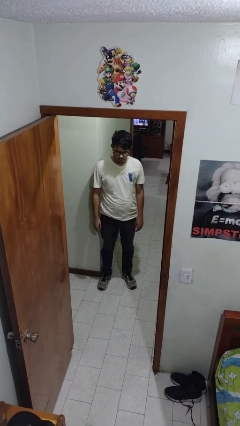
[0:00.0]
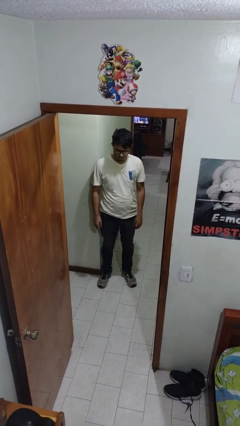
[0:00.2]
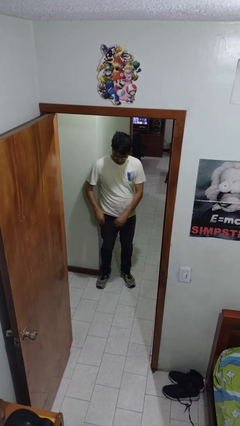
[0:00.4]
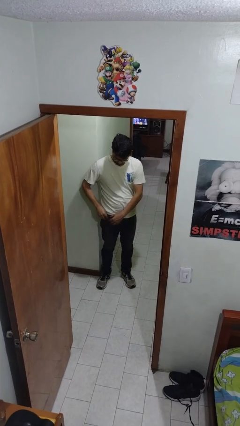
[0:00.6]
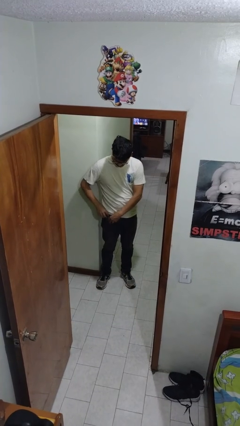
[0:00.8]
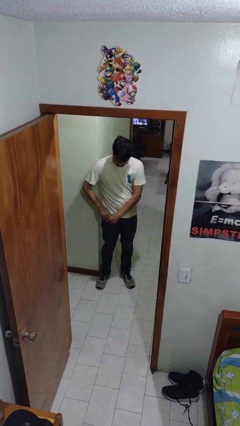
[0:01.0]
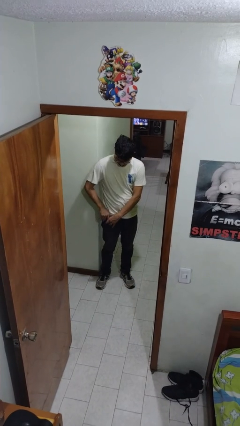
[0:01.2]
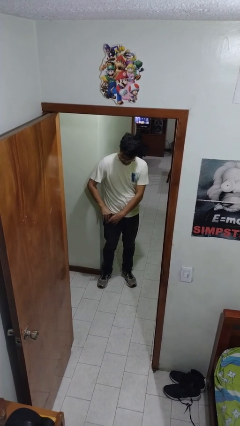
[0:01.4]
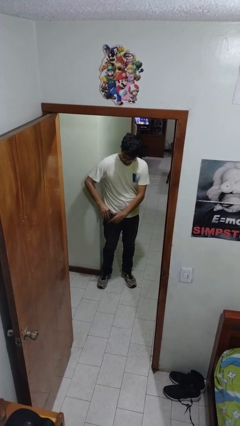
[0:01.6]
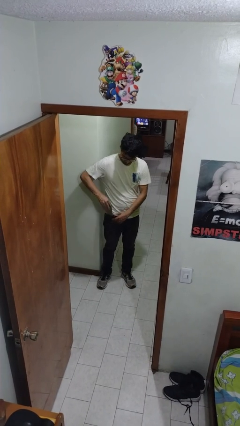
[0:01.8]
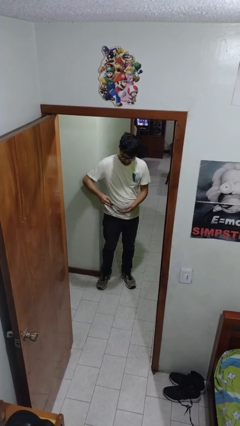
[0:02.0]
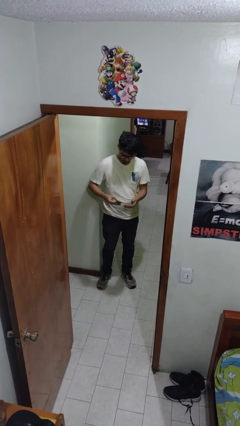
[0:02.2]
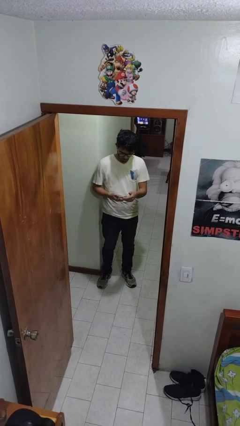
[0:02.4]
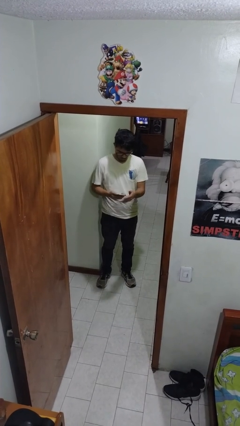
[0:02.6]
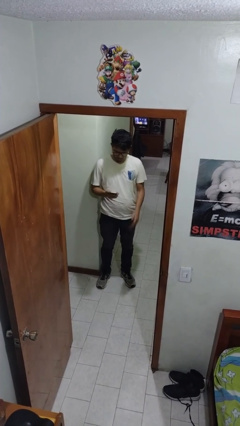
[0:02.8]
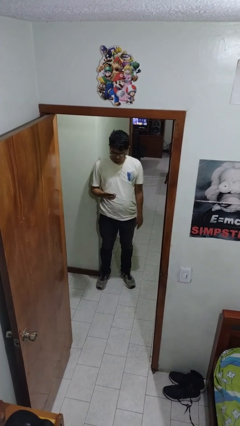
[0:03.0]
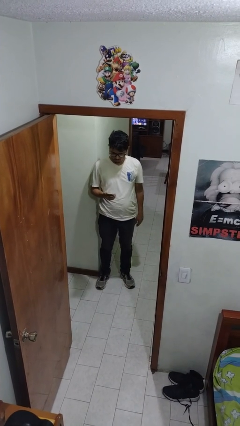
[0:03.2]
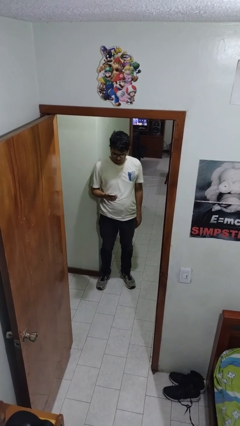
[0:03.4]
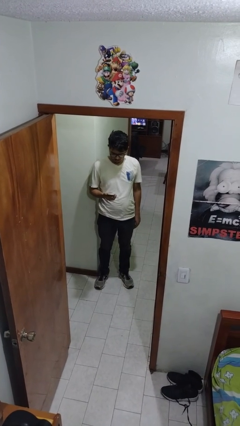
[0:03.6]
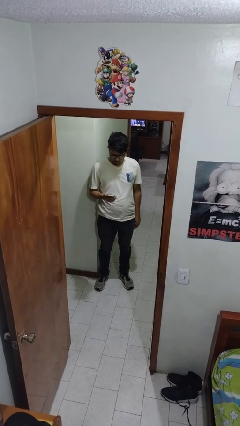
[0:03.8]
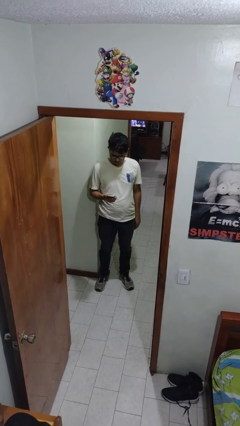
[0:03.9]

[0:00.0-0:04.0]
person takes phone from pocket

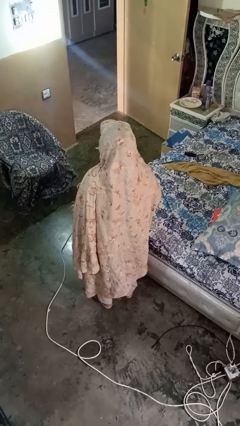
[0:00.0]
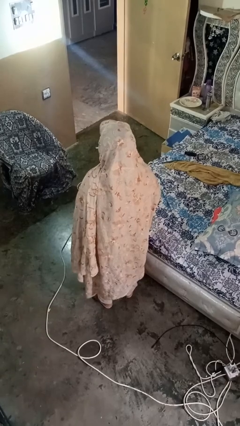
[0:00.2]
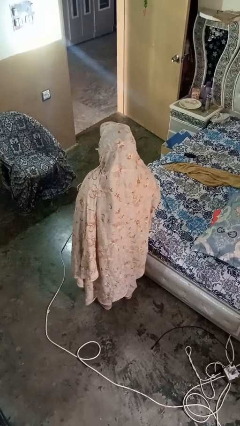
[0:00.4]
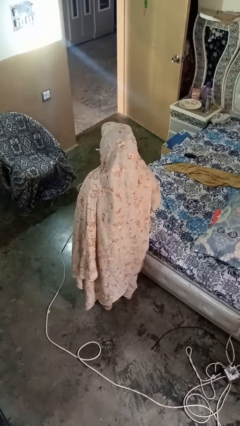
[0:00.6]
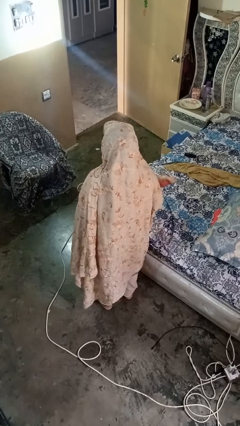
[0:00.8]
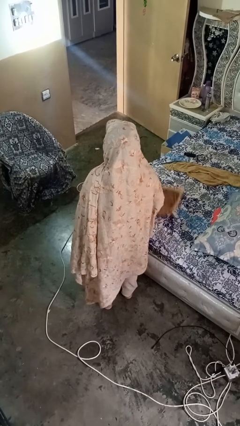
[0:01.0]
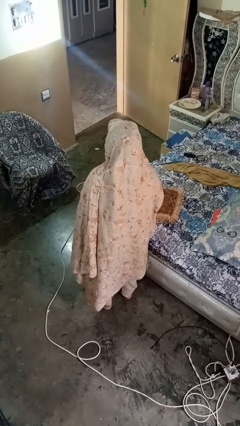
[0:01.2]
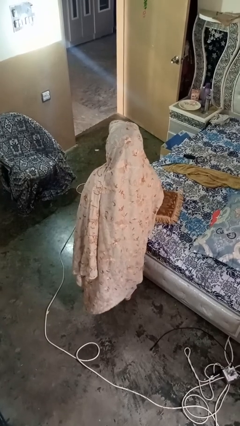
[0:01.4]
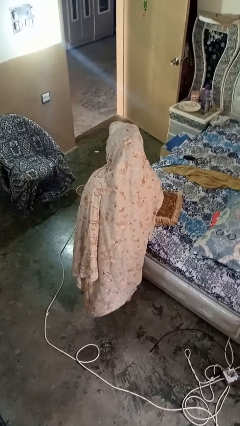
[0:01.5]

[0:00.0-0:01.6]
person puts down object on bed

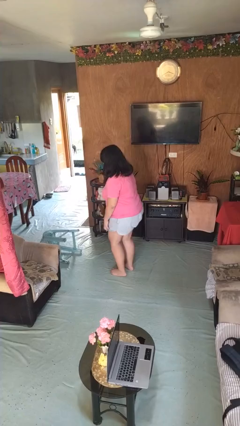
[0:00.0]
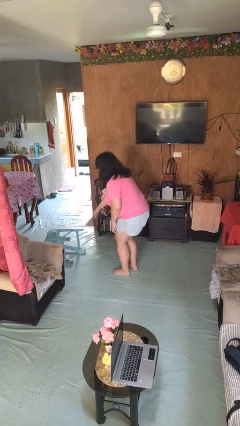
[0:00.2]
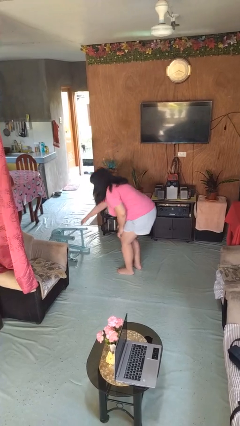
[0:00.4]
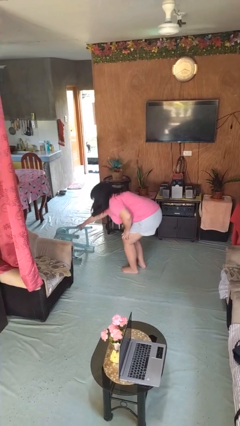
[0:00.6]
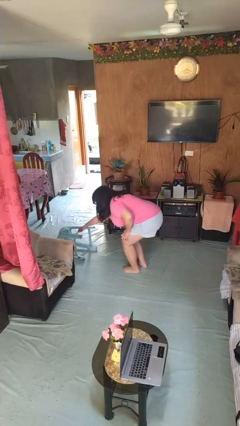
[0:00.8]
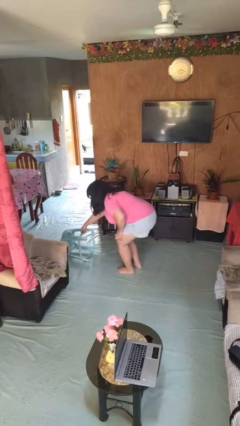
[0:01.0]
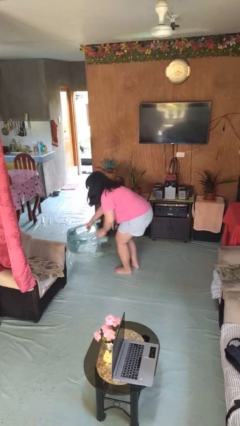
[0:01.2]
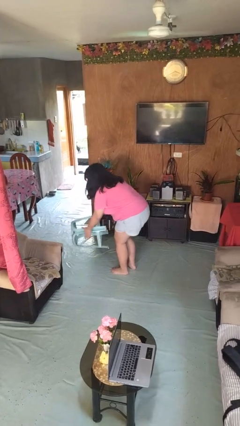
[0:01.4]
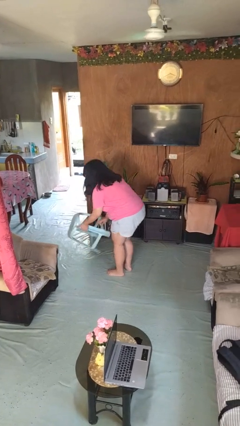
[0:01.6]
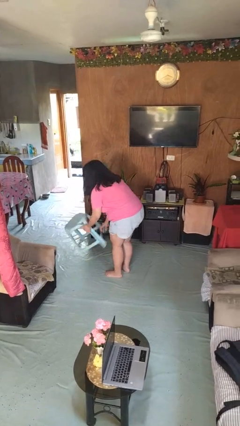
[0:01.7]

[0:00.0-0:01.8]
person sets upright furniture

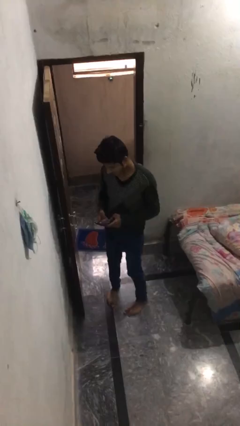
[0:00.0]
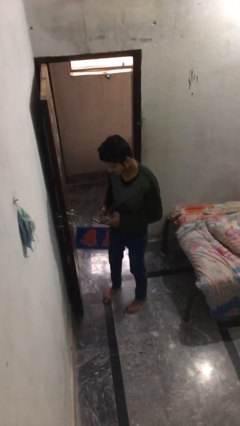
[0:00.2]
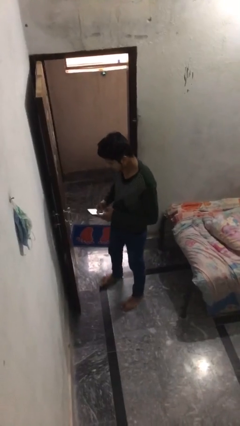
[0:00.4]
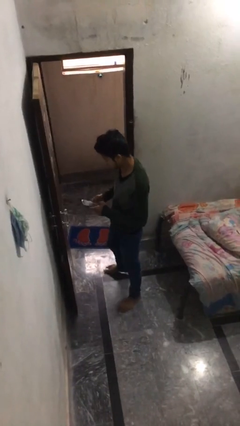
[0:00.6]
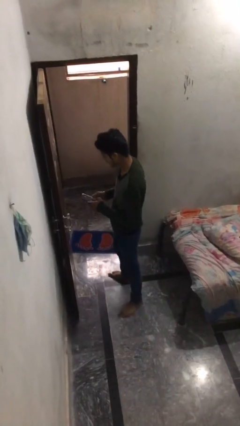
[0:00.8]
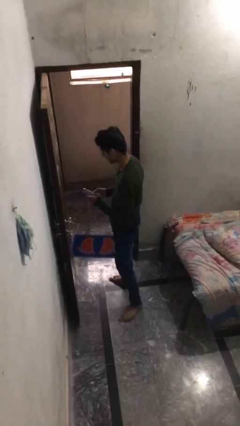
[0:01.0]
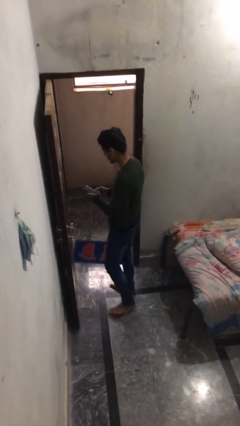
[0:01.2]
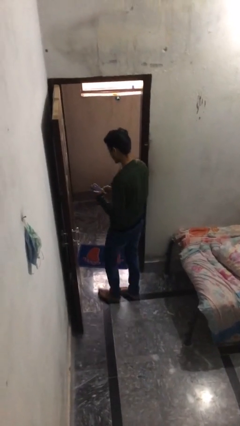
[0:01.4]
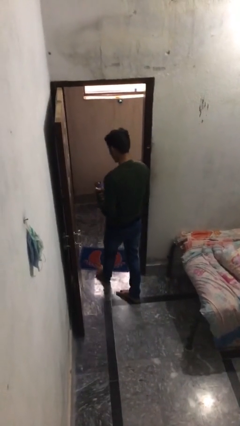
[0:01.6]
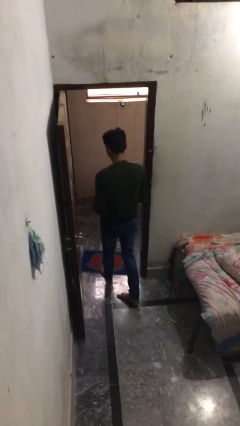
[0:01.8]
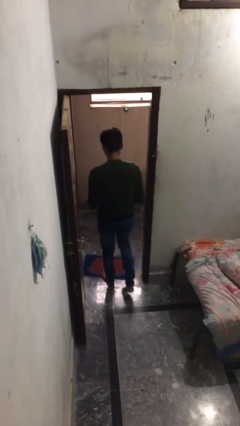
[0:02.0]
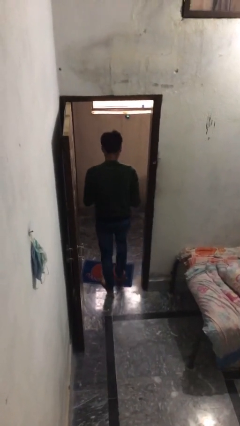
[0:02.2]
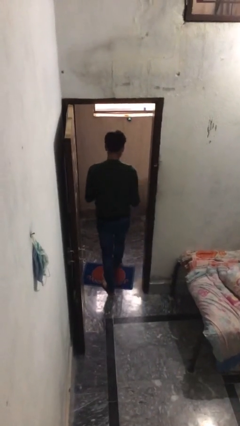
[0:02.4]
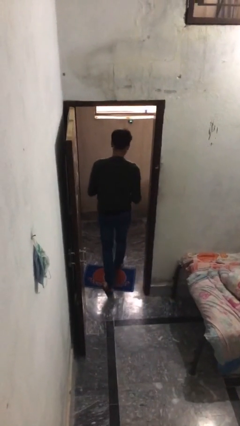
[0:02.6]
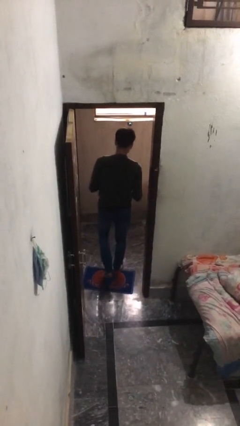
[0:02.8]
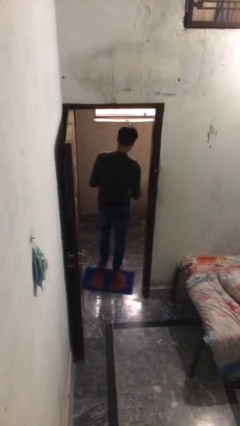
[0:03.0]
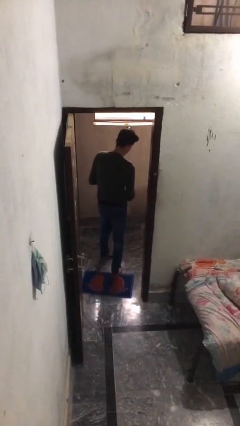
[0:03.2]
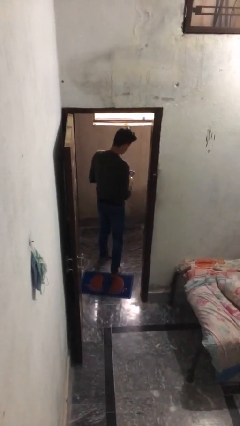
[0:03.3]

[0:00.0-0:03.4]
person exits scene through structure

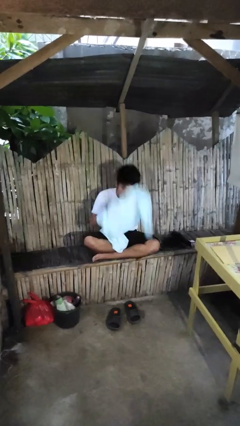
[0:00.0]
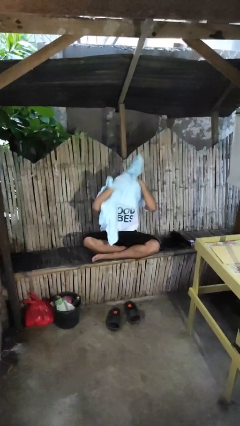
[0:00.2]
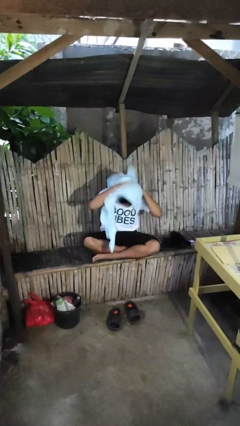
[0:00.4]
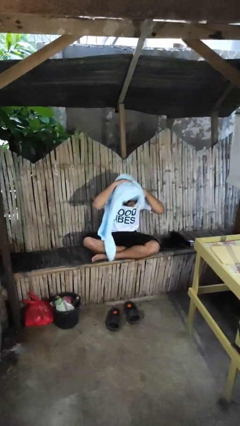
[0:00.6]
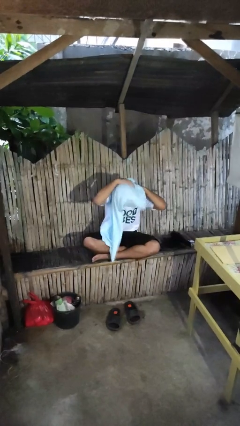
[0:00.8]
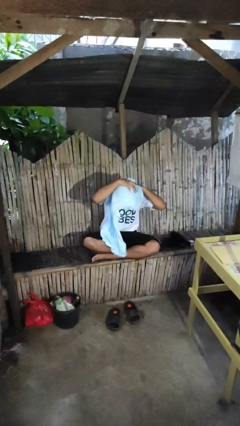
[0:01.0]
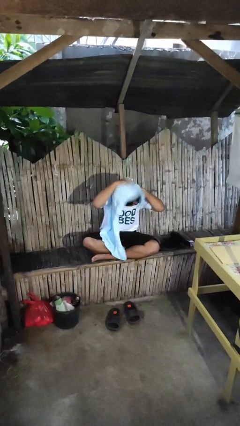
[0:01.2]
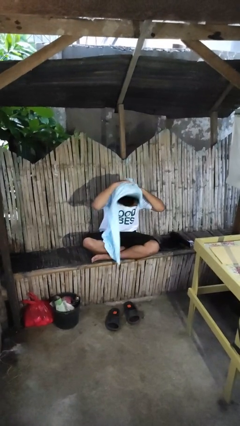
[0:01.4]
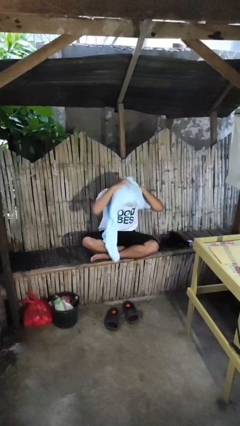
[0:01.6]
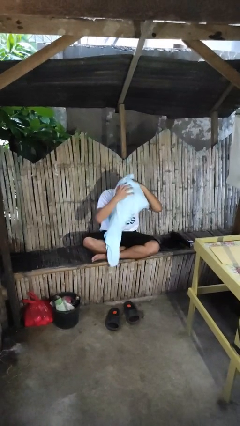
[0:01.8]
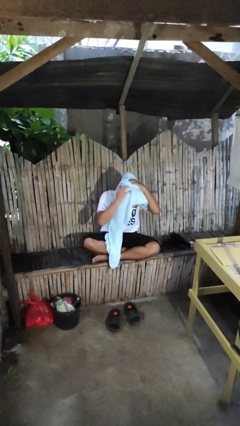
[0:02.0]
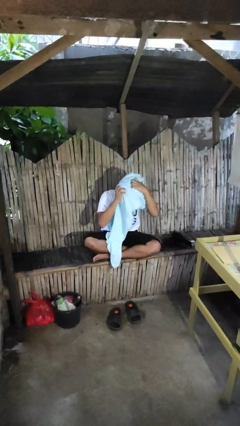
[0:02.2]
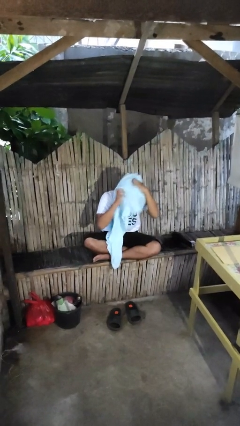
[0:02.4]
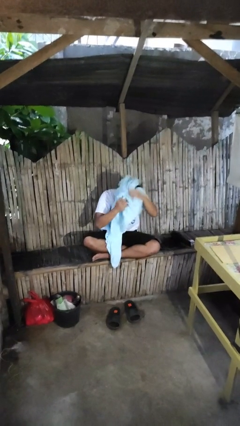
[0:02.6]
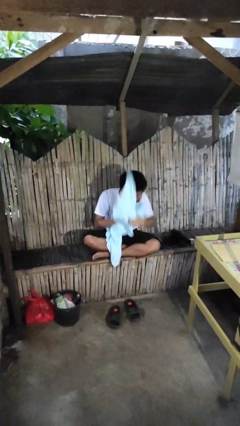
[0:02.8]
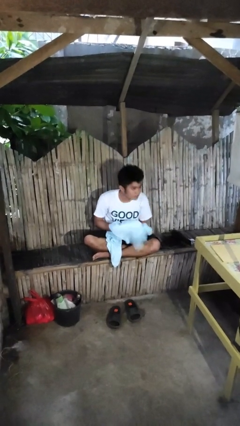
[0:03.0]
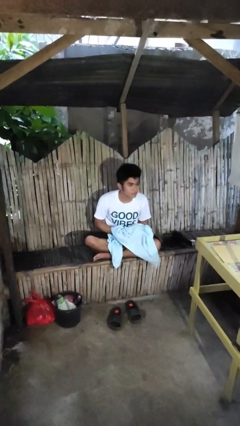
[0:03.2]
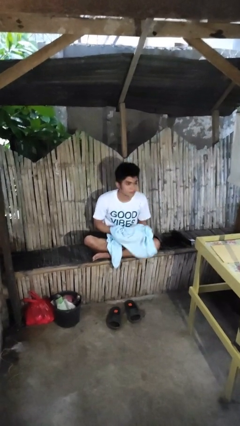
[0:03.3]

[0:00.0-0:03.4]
person dries hair with towel

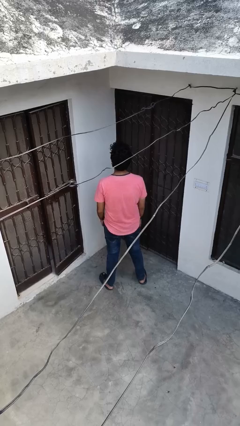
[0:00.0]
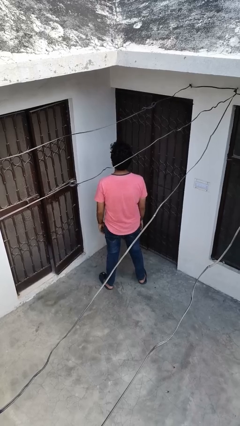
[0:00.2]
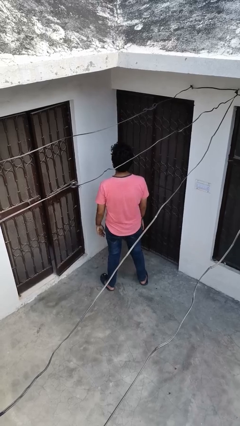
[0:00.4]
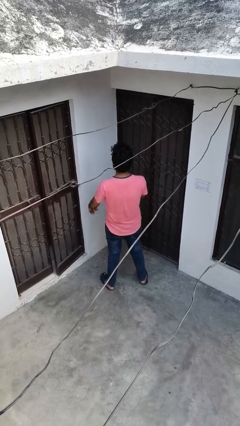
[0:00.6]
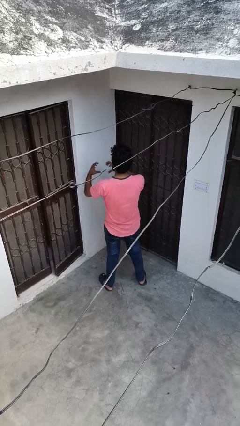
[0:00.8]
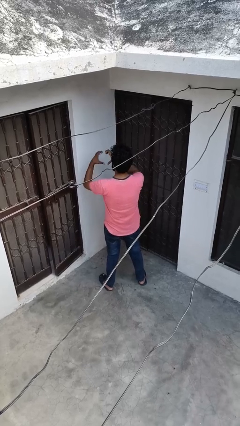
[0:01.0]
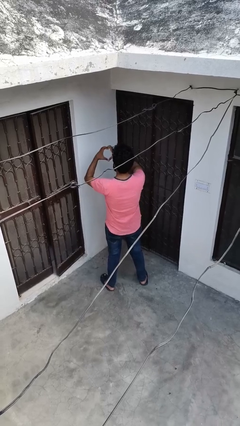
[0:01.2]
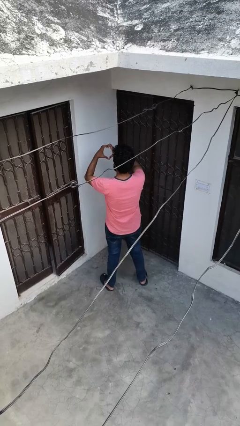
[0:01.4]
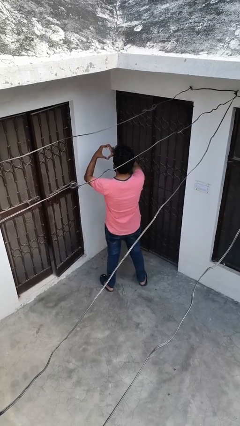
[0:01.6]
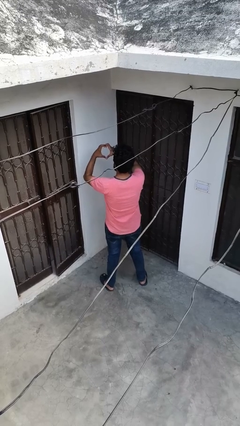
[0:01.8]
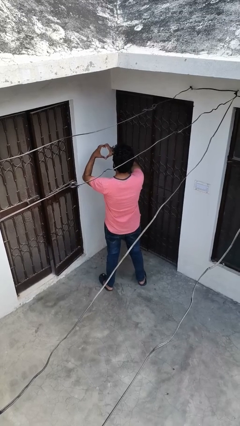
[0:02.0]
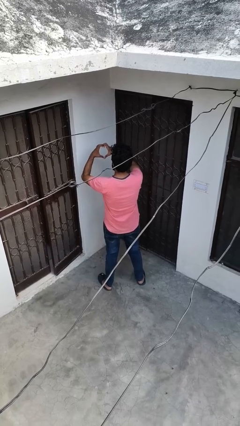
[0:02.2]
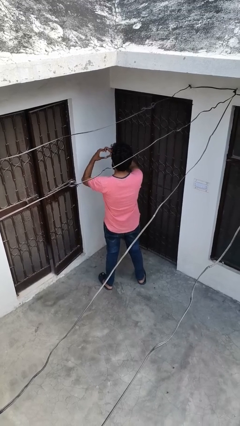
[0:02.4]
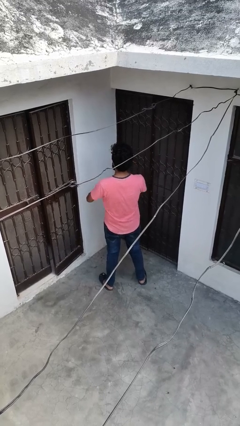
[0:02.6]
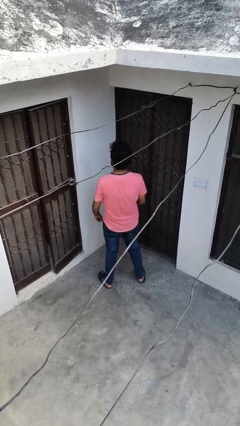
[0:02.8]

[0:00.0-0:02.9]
person gestures heart

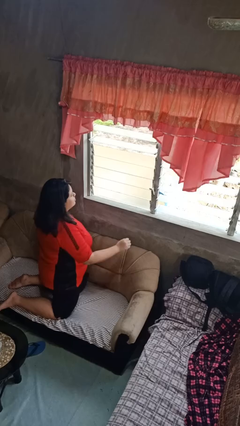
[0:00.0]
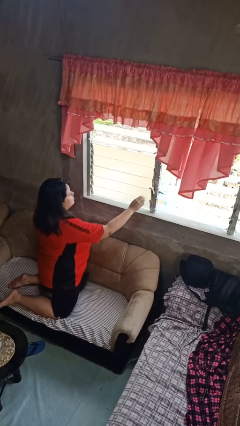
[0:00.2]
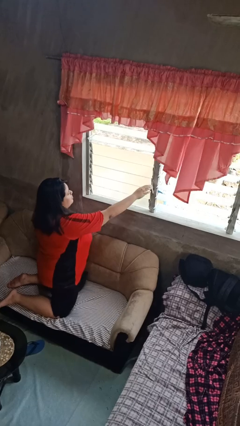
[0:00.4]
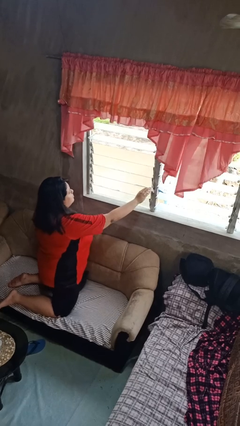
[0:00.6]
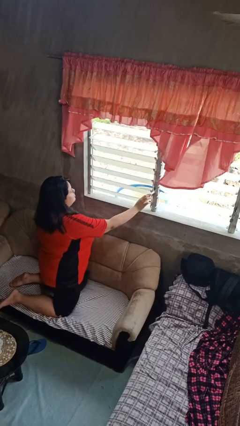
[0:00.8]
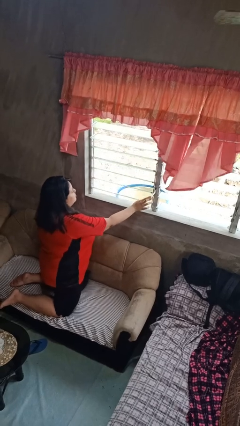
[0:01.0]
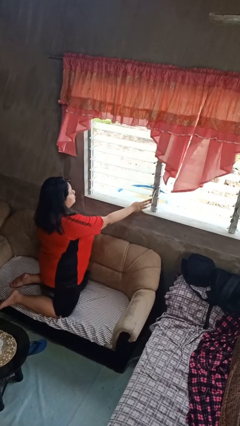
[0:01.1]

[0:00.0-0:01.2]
person opens home window
